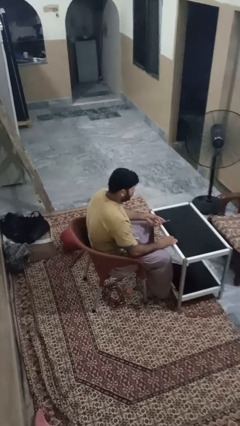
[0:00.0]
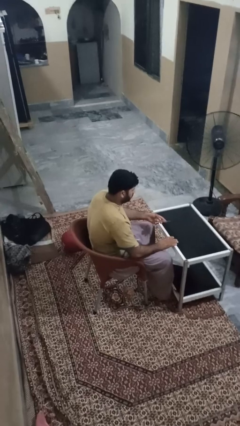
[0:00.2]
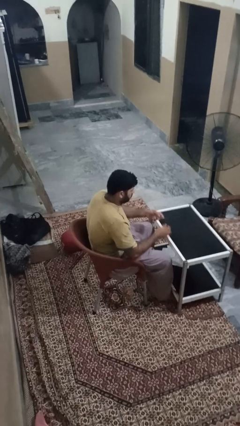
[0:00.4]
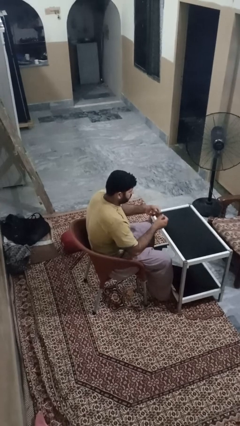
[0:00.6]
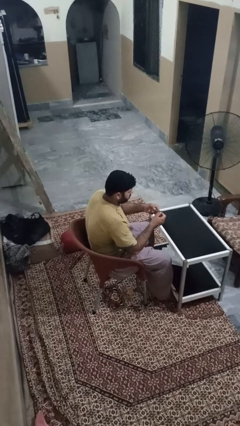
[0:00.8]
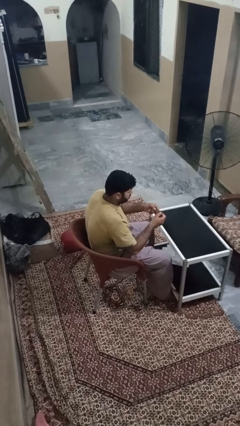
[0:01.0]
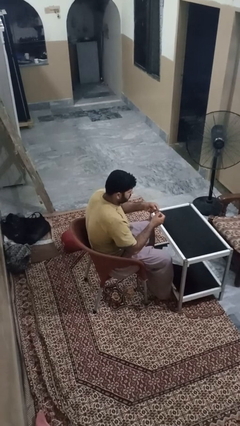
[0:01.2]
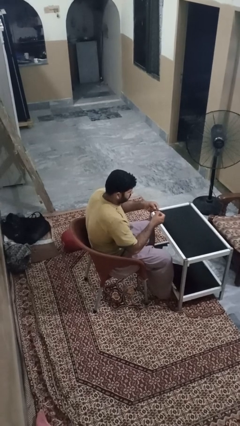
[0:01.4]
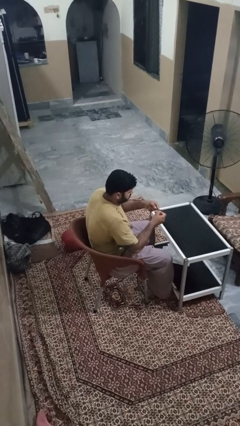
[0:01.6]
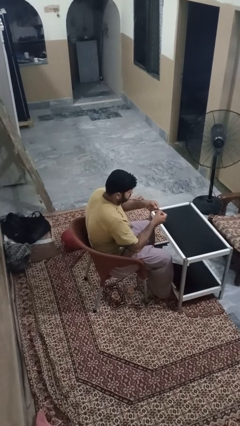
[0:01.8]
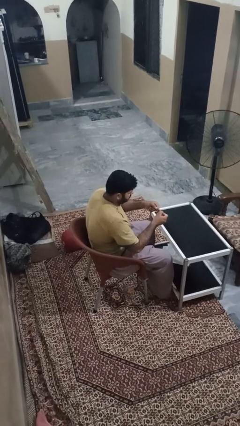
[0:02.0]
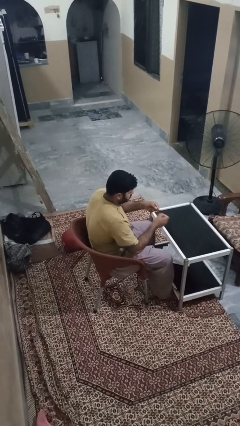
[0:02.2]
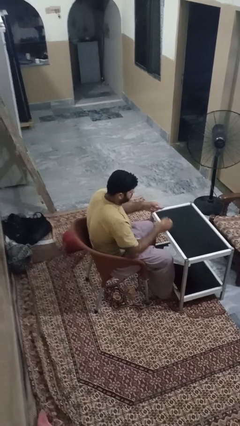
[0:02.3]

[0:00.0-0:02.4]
person files fingernails

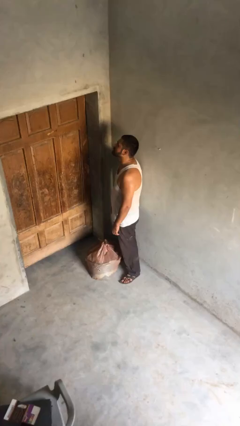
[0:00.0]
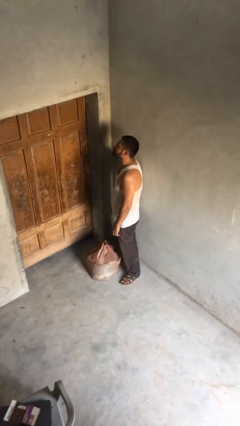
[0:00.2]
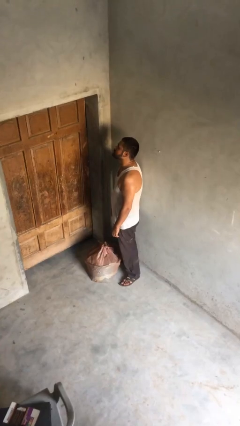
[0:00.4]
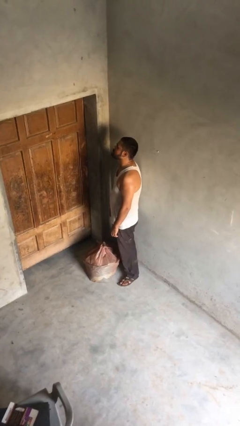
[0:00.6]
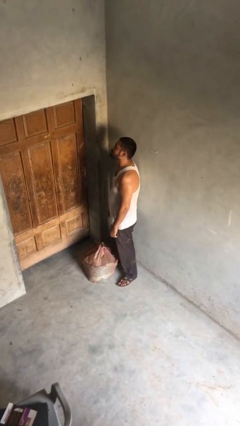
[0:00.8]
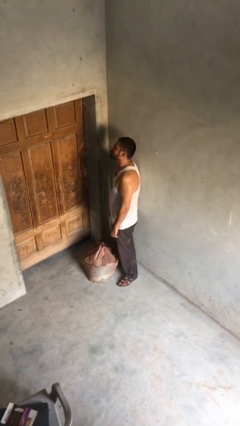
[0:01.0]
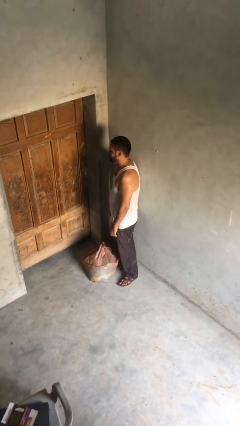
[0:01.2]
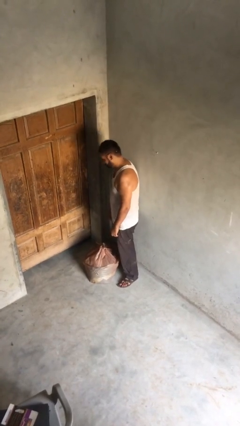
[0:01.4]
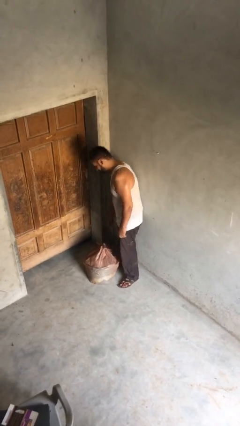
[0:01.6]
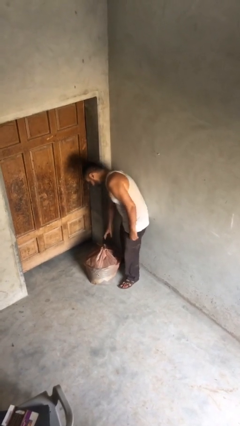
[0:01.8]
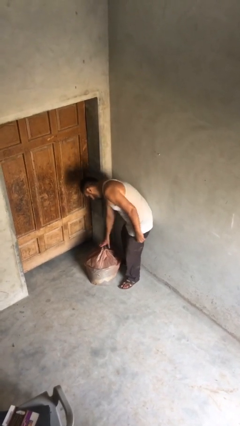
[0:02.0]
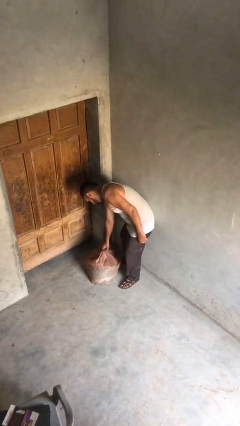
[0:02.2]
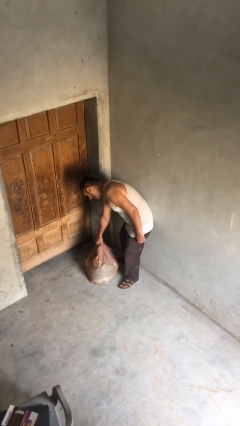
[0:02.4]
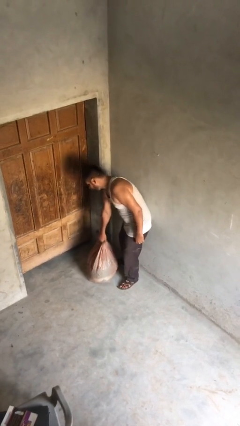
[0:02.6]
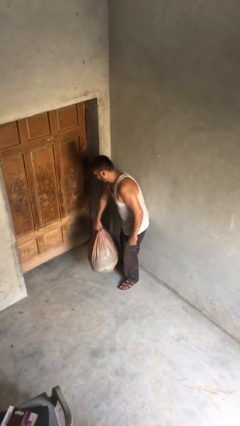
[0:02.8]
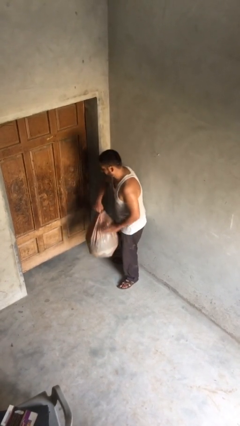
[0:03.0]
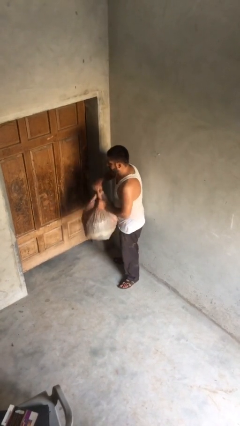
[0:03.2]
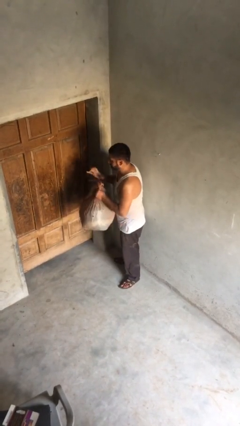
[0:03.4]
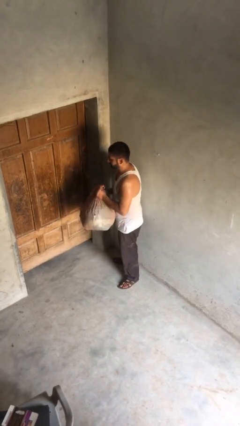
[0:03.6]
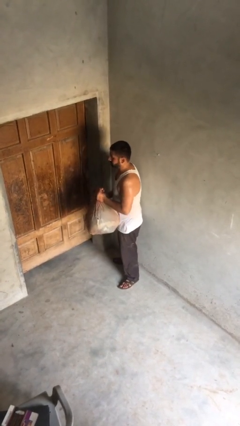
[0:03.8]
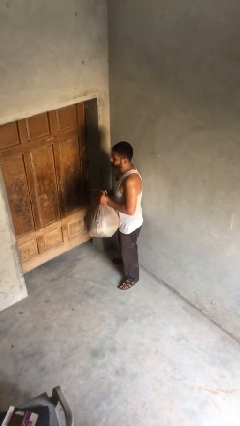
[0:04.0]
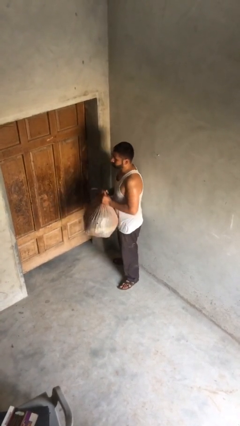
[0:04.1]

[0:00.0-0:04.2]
person picks up object from floor

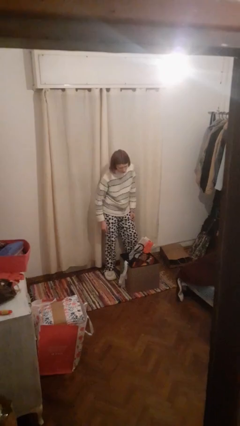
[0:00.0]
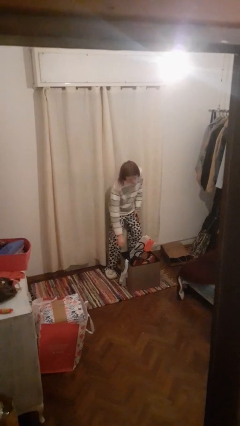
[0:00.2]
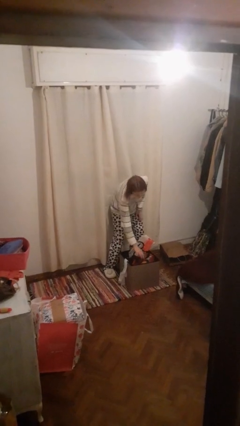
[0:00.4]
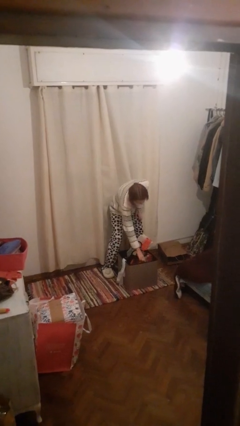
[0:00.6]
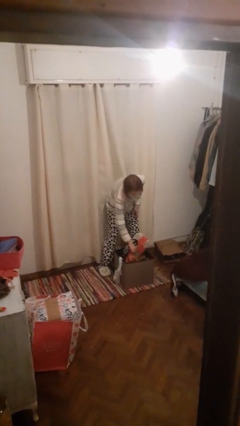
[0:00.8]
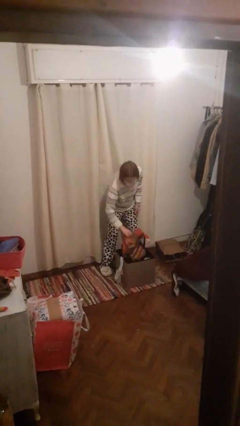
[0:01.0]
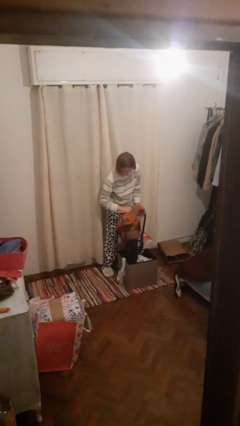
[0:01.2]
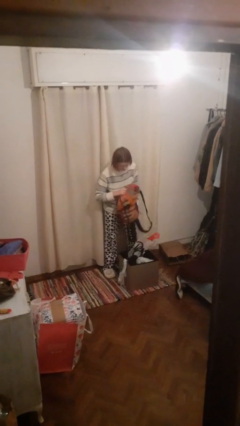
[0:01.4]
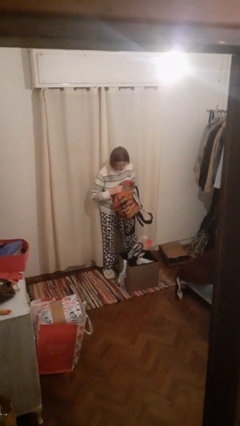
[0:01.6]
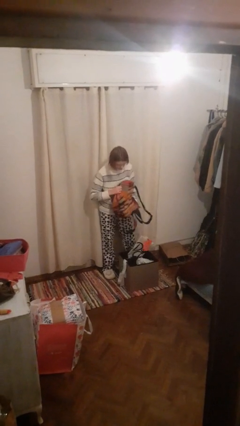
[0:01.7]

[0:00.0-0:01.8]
person takes object from basket

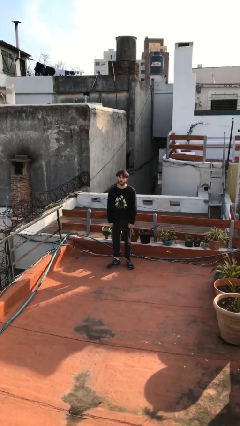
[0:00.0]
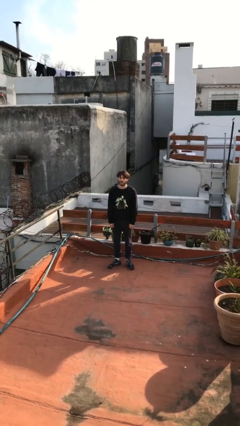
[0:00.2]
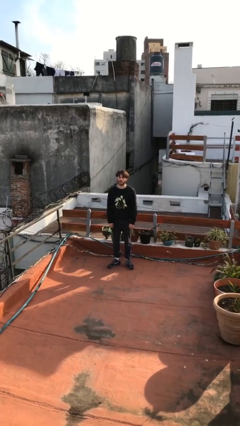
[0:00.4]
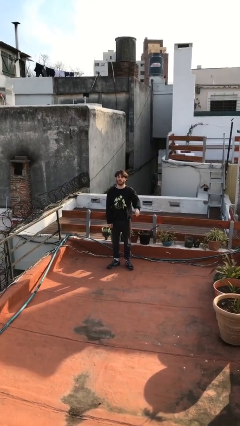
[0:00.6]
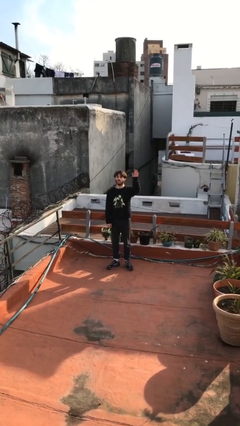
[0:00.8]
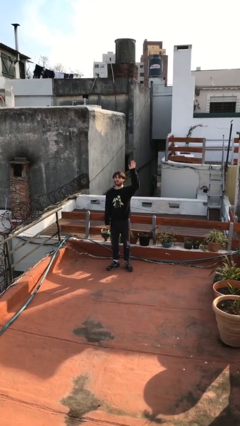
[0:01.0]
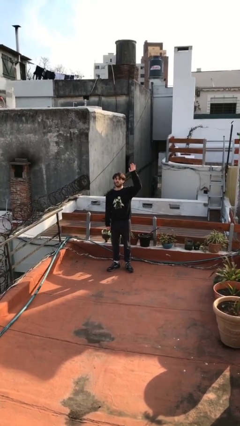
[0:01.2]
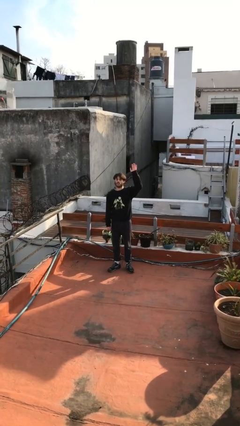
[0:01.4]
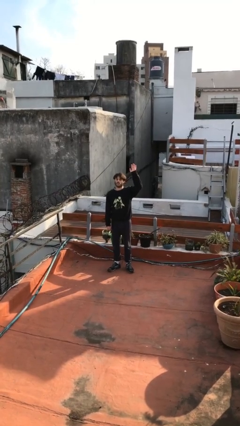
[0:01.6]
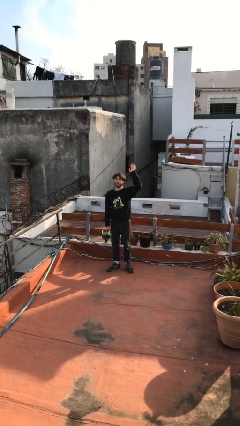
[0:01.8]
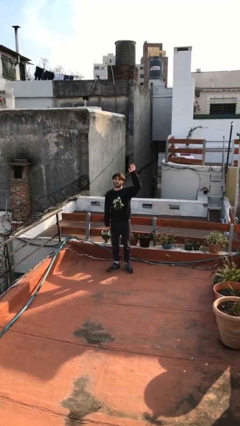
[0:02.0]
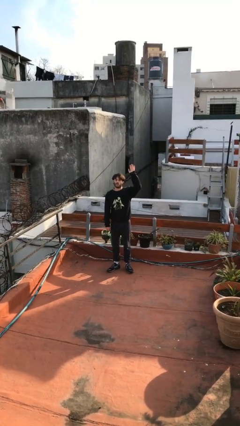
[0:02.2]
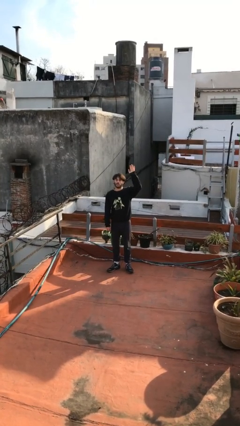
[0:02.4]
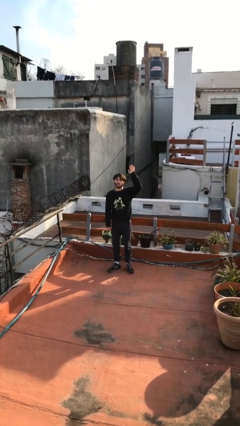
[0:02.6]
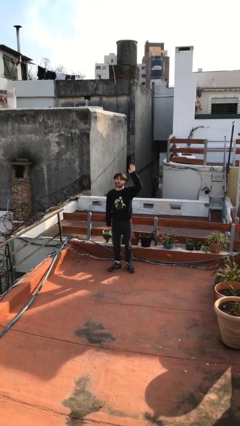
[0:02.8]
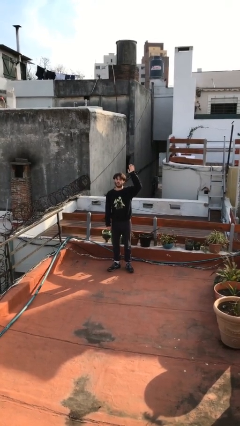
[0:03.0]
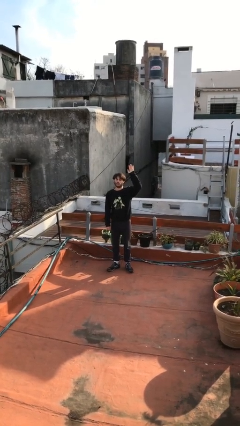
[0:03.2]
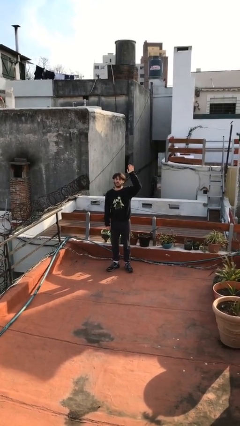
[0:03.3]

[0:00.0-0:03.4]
person gestures raise hand

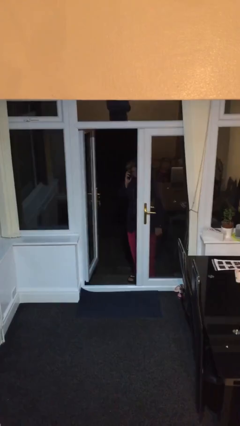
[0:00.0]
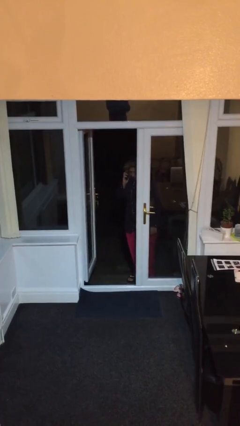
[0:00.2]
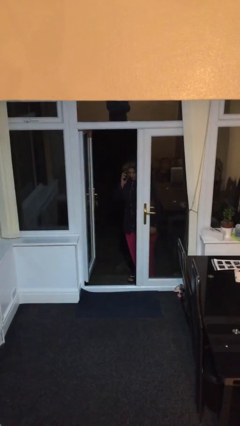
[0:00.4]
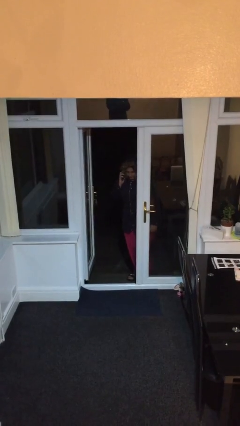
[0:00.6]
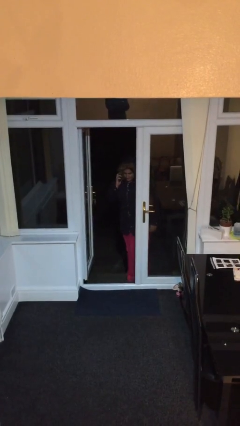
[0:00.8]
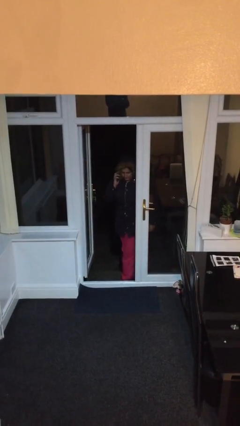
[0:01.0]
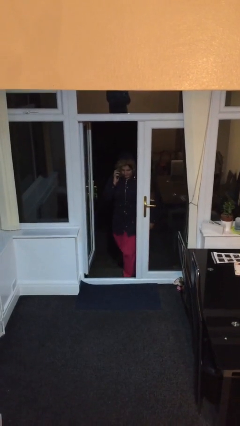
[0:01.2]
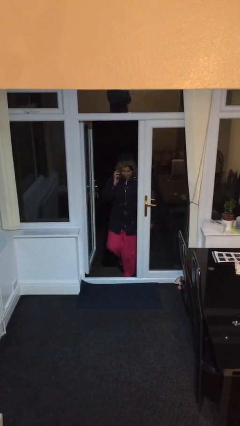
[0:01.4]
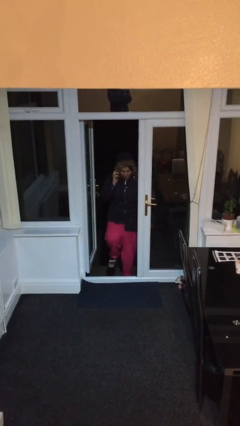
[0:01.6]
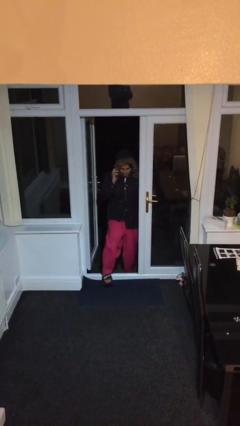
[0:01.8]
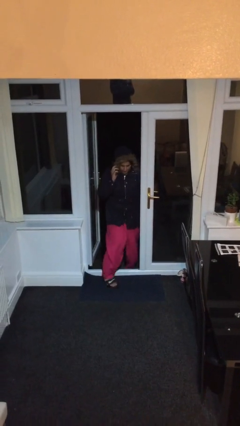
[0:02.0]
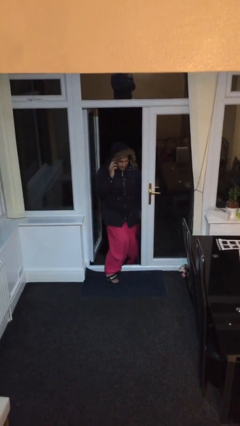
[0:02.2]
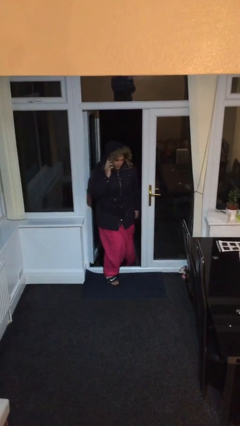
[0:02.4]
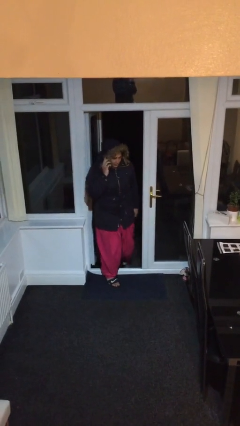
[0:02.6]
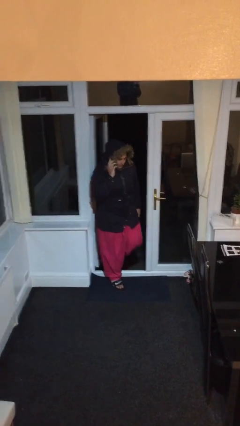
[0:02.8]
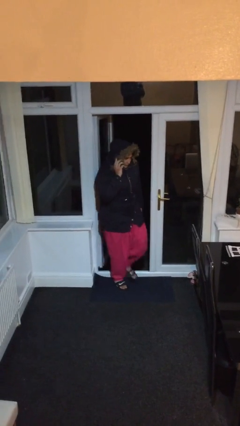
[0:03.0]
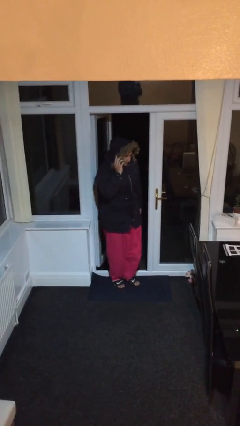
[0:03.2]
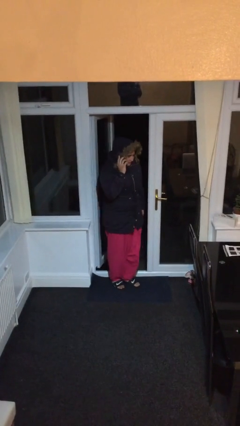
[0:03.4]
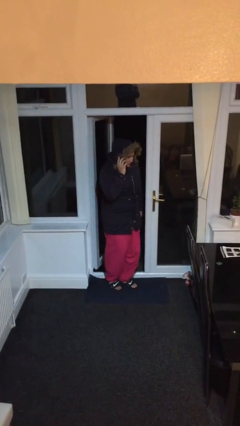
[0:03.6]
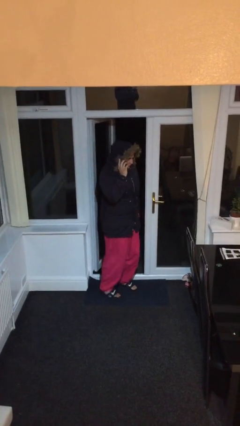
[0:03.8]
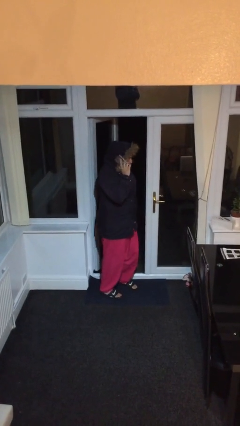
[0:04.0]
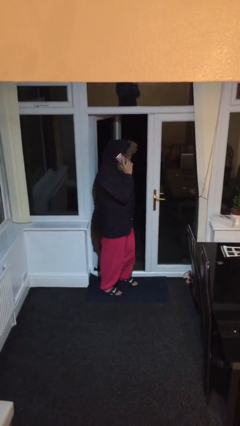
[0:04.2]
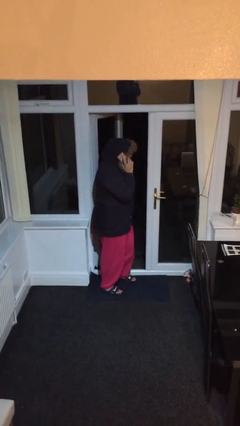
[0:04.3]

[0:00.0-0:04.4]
person enters scene through structure

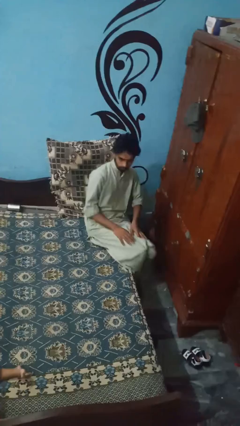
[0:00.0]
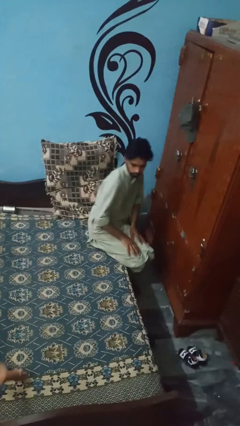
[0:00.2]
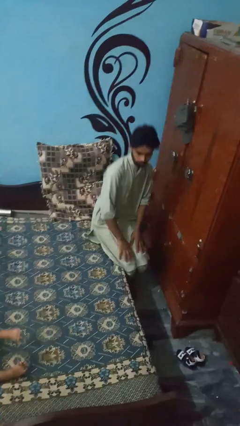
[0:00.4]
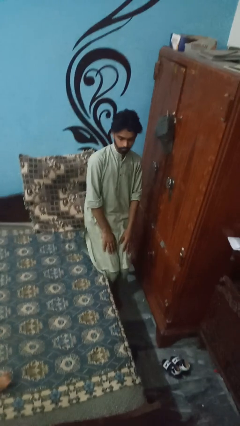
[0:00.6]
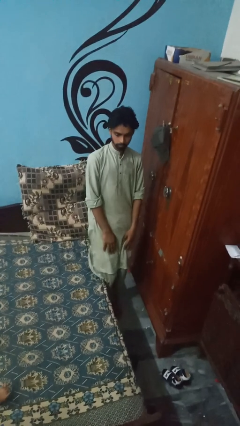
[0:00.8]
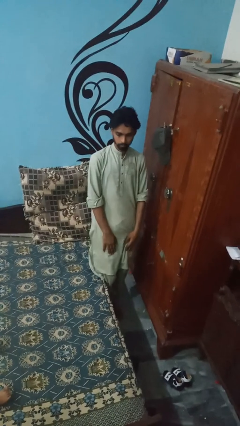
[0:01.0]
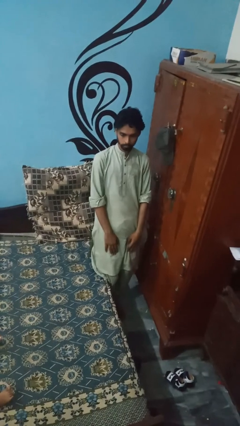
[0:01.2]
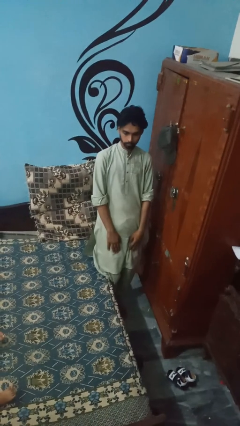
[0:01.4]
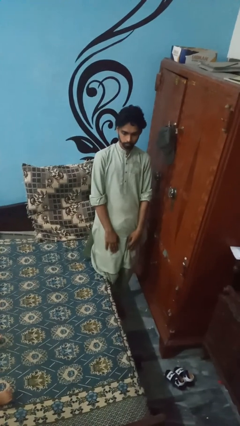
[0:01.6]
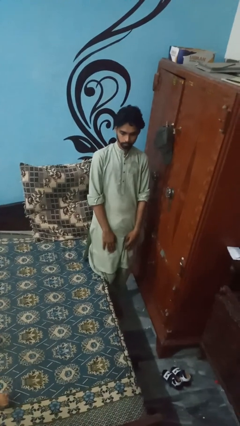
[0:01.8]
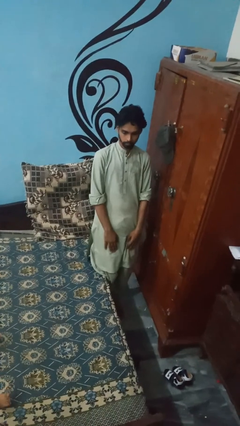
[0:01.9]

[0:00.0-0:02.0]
person stands up
